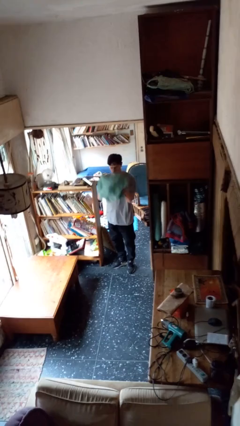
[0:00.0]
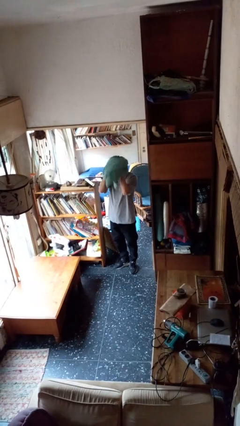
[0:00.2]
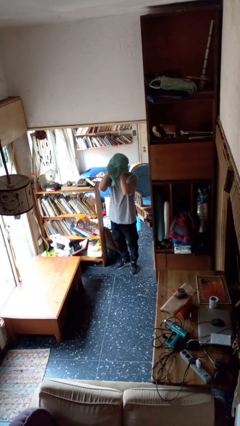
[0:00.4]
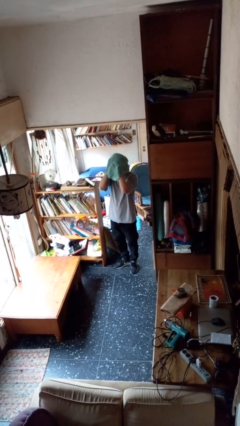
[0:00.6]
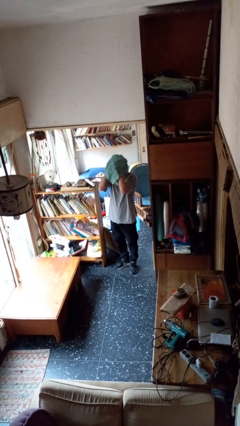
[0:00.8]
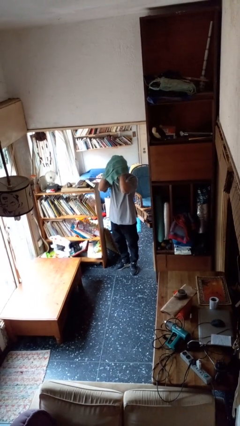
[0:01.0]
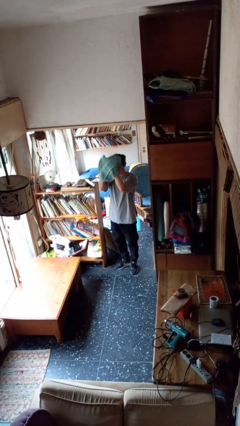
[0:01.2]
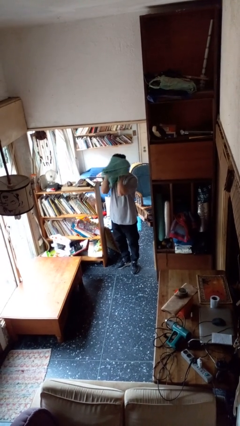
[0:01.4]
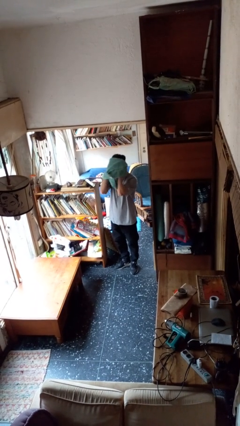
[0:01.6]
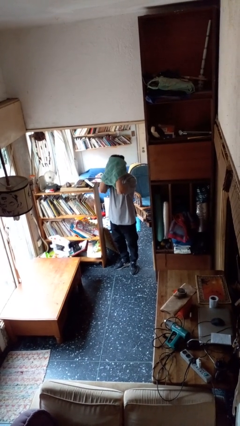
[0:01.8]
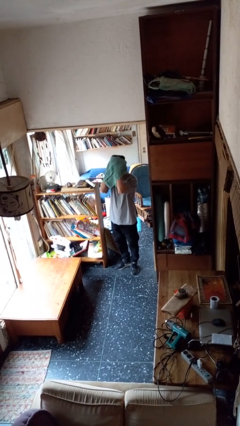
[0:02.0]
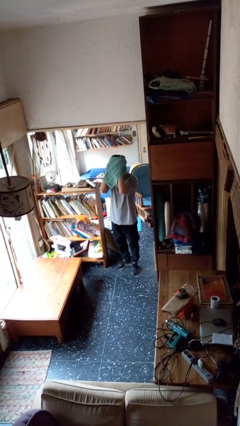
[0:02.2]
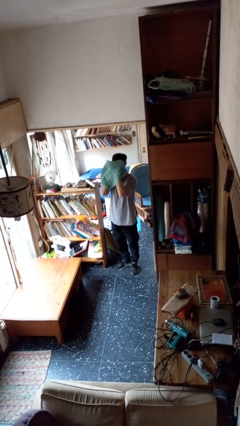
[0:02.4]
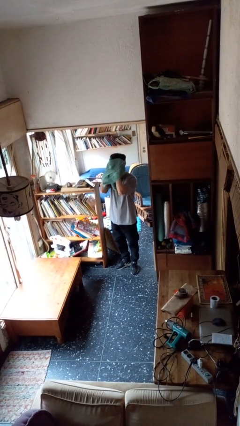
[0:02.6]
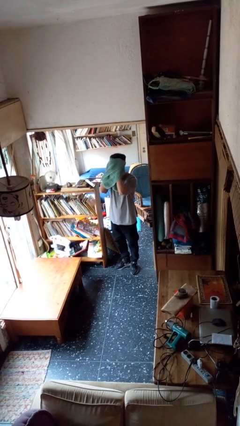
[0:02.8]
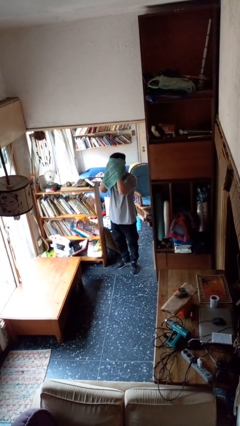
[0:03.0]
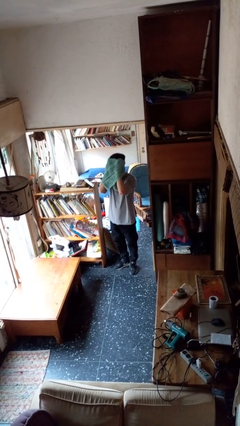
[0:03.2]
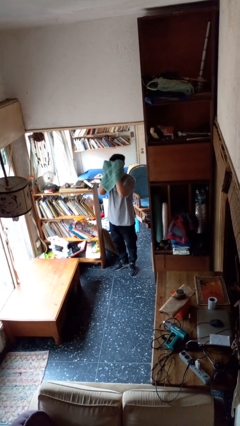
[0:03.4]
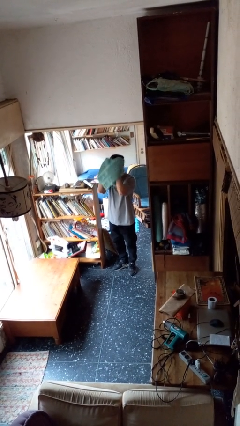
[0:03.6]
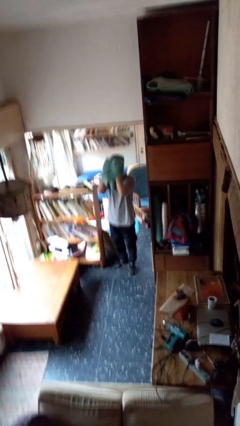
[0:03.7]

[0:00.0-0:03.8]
person dries hair with towel

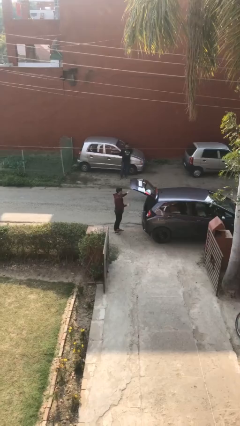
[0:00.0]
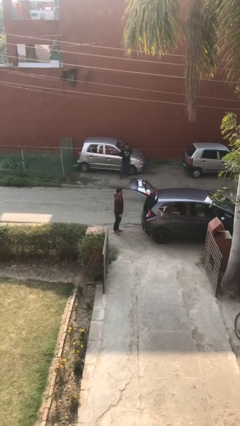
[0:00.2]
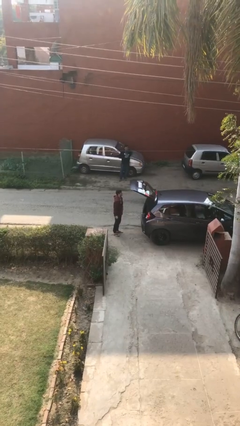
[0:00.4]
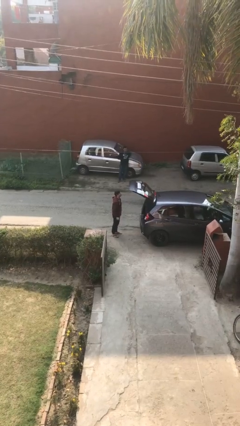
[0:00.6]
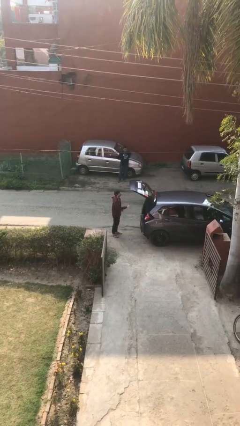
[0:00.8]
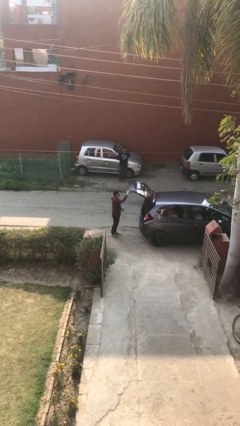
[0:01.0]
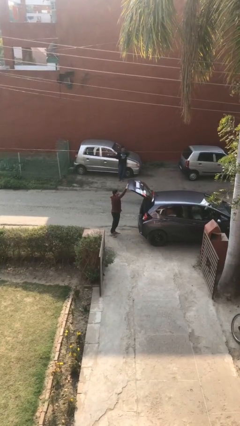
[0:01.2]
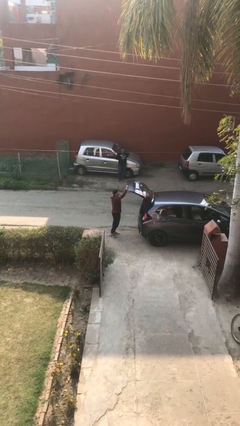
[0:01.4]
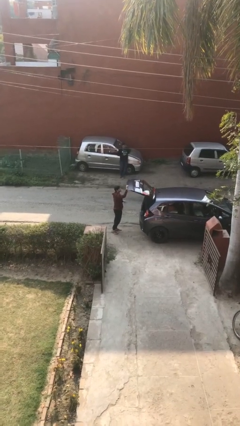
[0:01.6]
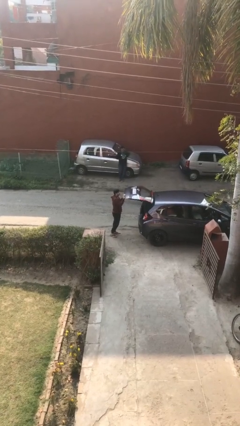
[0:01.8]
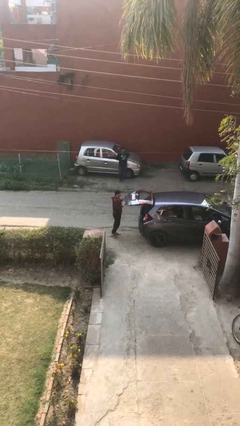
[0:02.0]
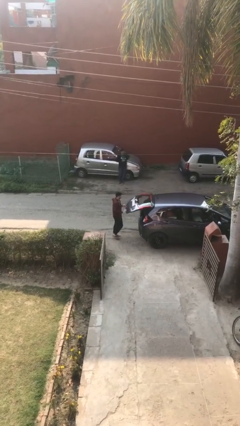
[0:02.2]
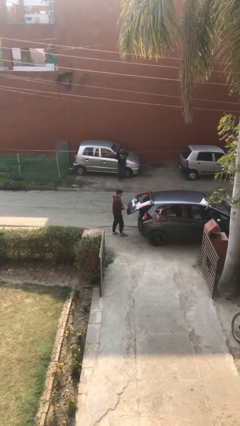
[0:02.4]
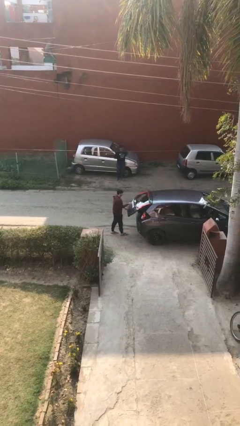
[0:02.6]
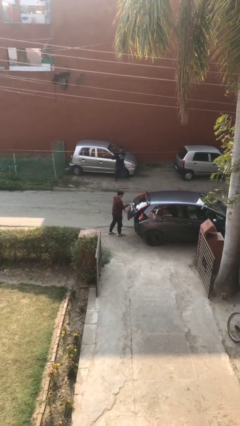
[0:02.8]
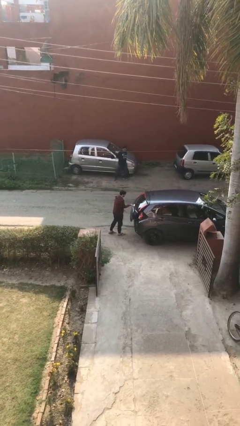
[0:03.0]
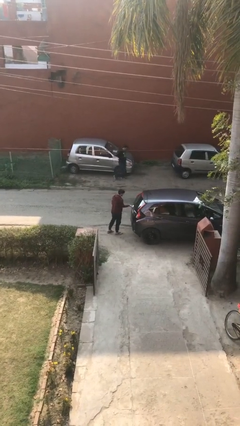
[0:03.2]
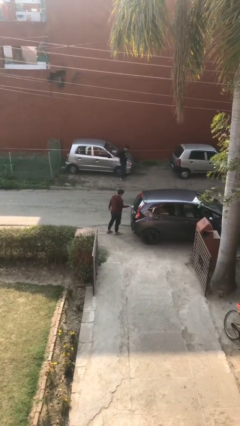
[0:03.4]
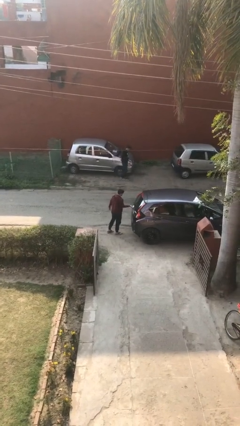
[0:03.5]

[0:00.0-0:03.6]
person closes car trunk

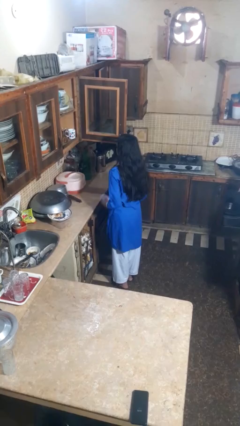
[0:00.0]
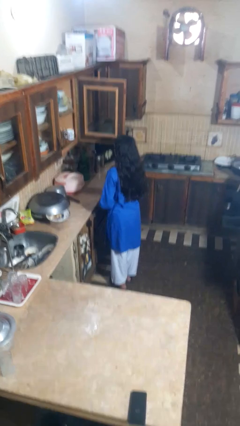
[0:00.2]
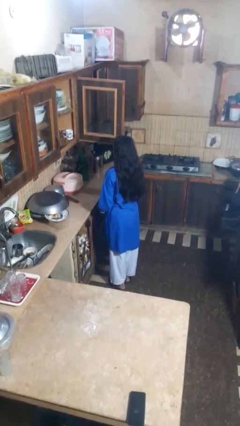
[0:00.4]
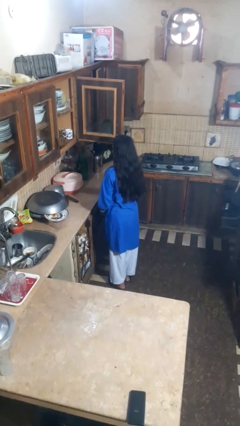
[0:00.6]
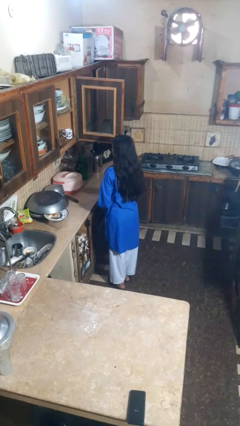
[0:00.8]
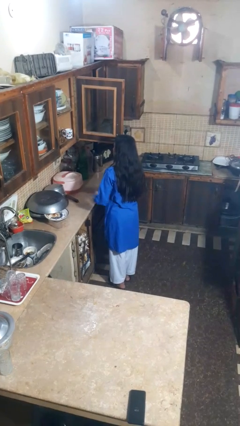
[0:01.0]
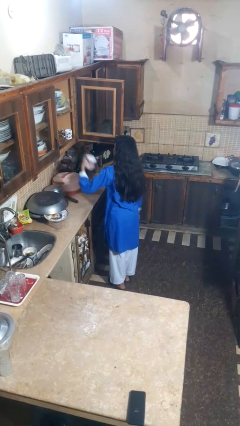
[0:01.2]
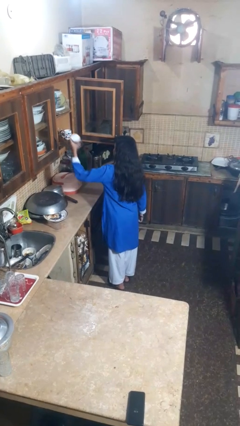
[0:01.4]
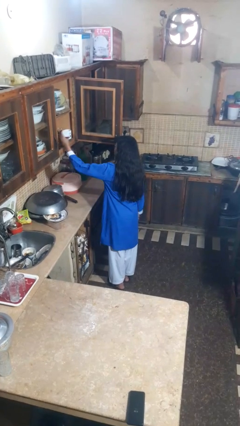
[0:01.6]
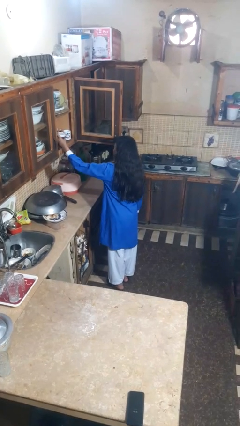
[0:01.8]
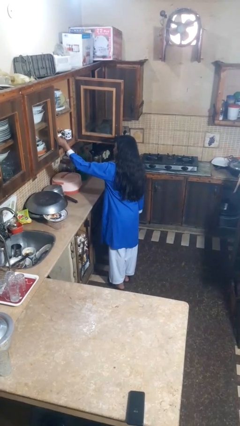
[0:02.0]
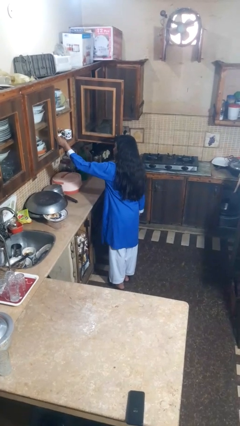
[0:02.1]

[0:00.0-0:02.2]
person puts object in cabinet

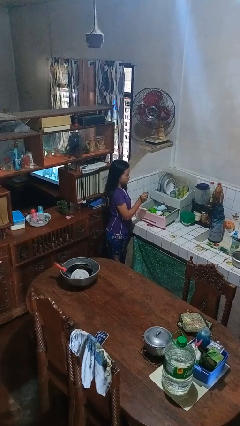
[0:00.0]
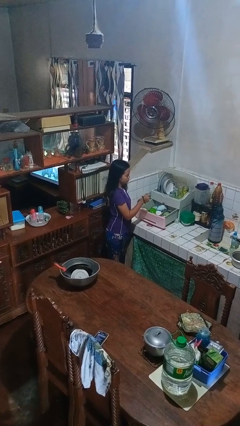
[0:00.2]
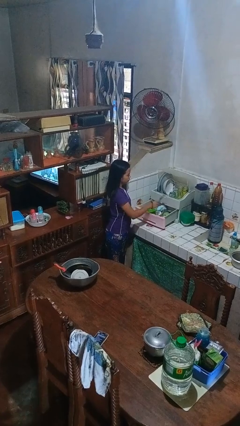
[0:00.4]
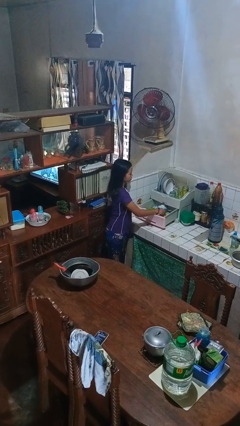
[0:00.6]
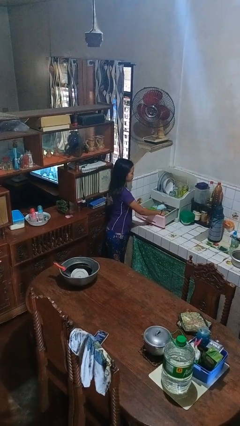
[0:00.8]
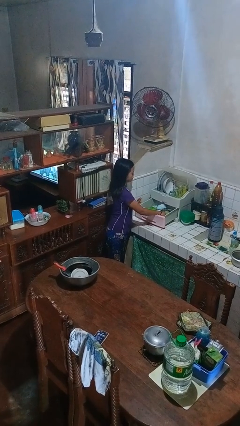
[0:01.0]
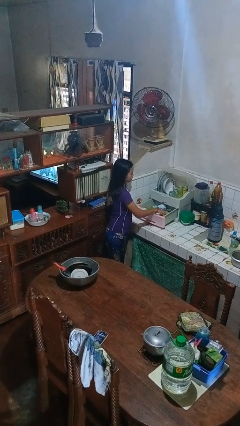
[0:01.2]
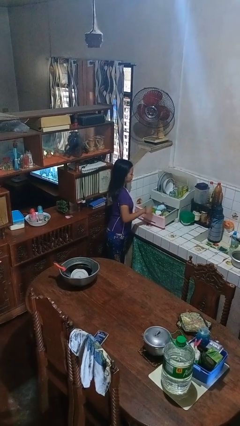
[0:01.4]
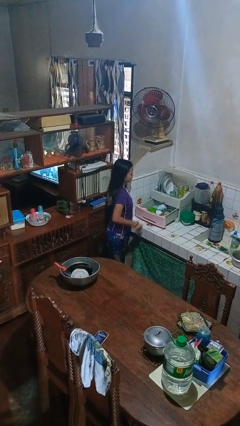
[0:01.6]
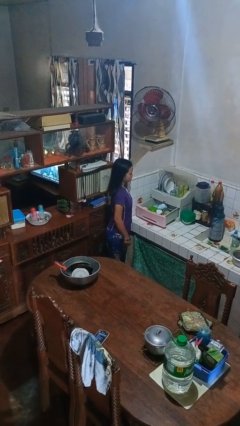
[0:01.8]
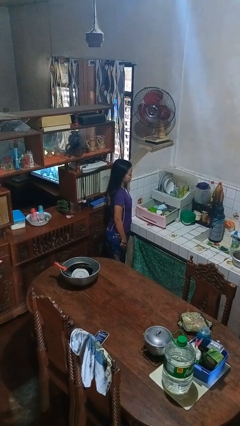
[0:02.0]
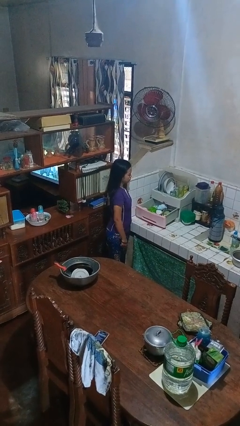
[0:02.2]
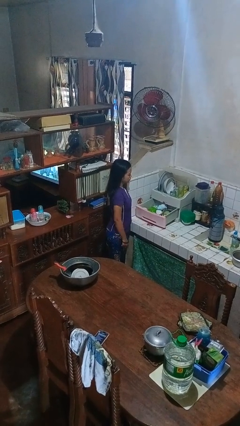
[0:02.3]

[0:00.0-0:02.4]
person puts object into kitchen drawer

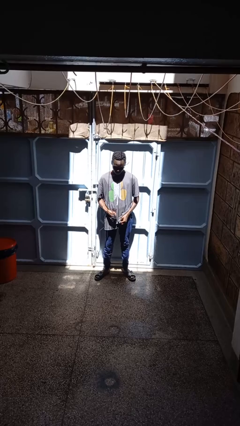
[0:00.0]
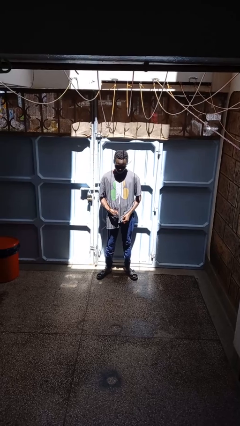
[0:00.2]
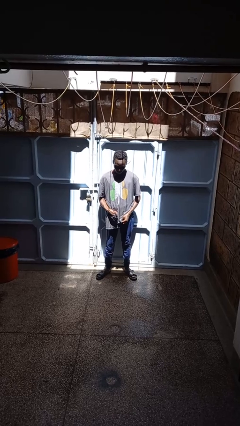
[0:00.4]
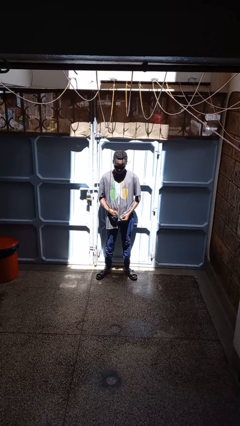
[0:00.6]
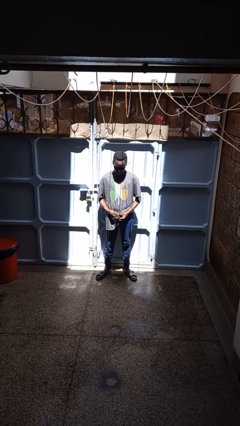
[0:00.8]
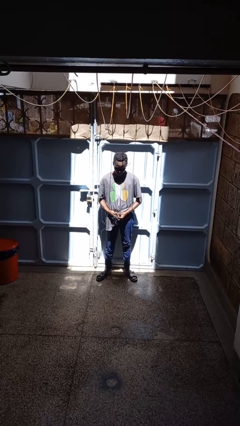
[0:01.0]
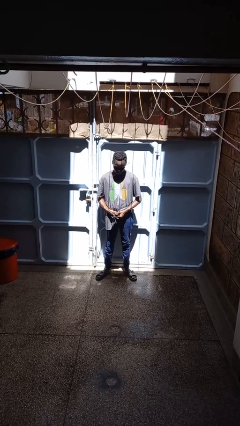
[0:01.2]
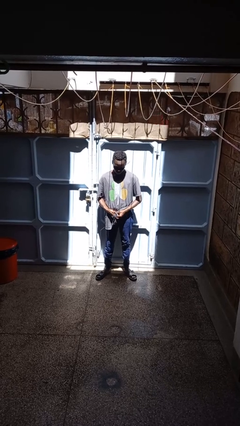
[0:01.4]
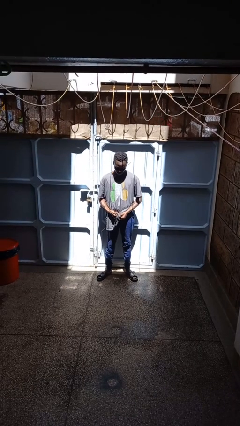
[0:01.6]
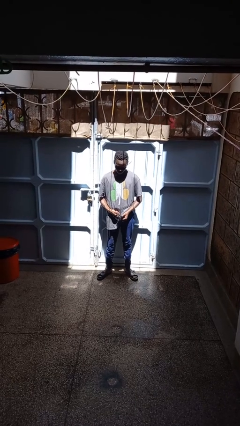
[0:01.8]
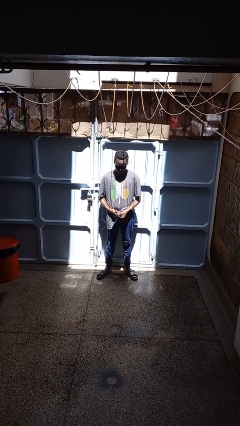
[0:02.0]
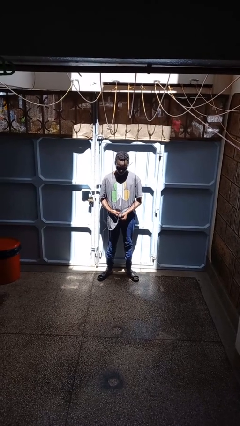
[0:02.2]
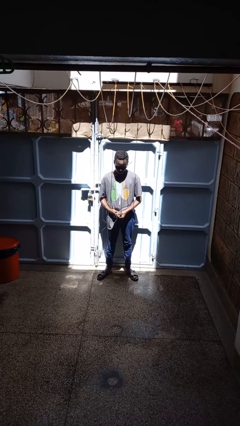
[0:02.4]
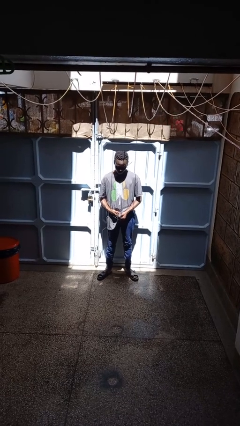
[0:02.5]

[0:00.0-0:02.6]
person cleans eyeglasses

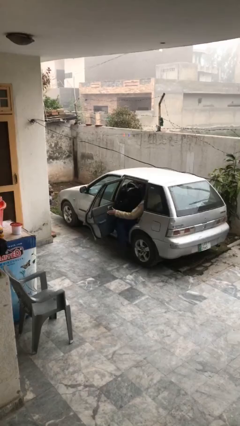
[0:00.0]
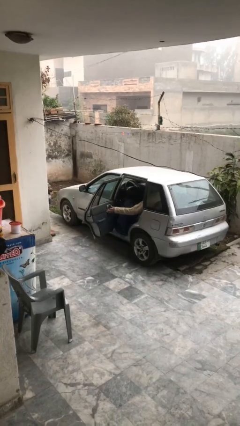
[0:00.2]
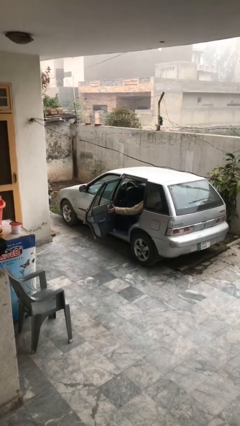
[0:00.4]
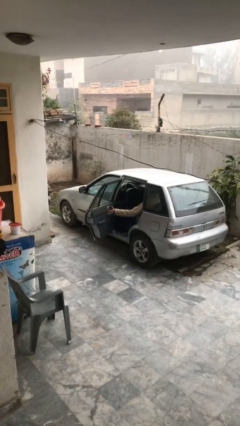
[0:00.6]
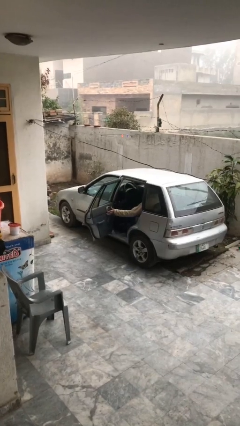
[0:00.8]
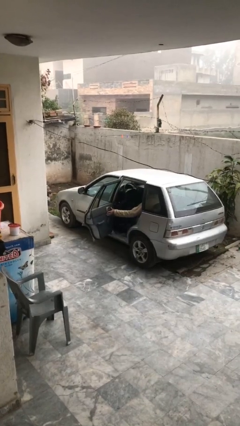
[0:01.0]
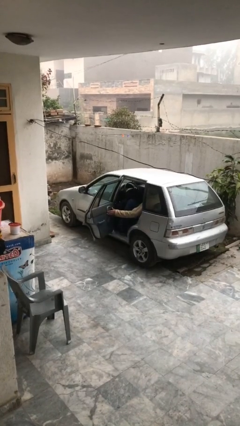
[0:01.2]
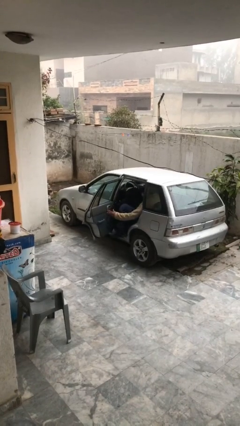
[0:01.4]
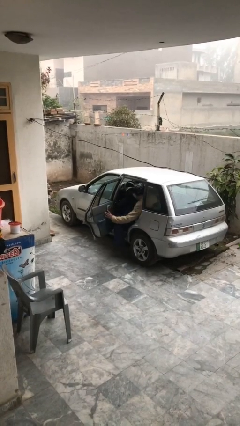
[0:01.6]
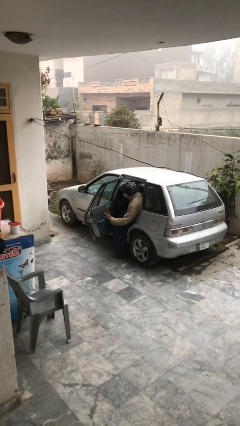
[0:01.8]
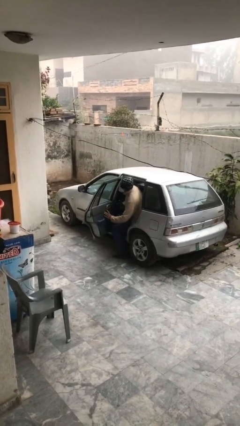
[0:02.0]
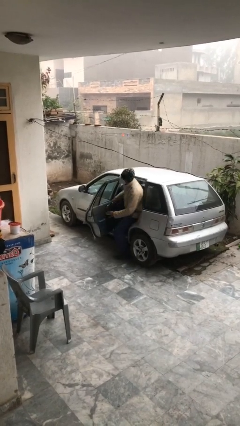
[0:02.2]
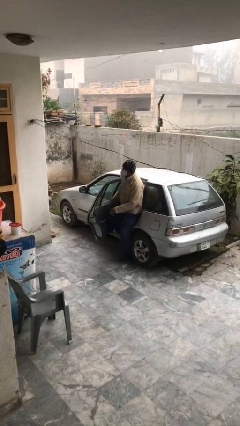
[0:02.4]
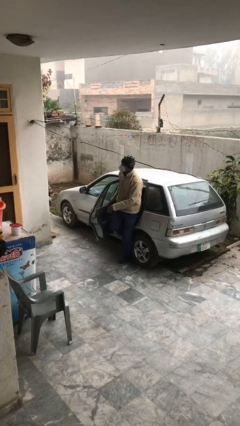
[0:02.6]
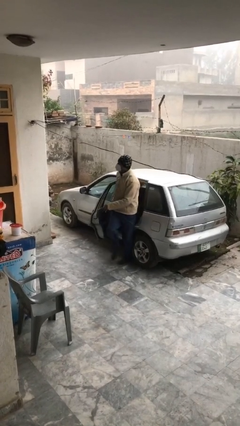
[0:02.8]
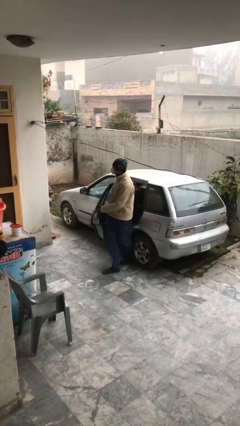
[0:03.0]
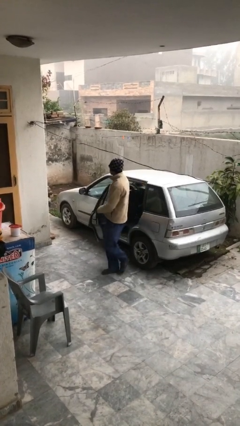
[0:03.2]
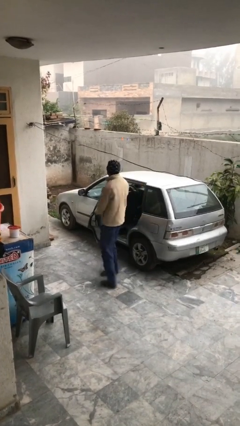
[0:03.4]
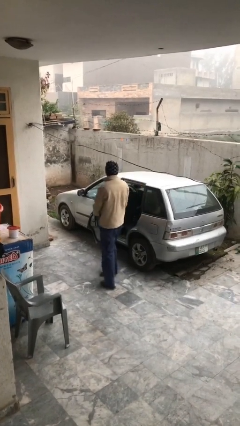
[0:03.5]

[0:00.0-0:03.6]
person exits car
